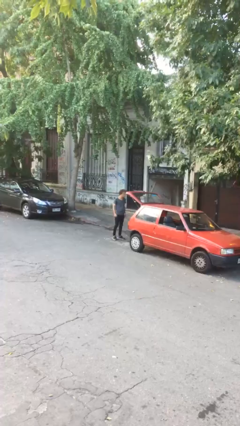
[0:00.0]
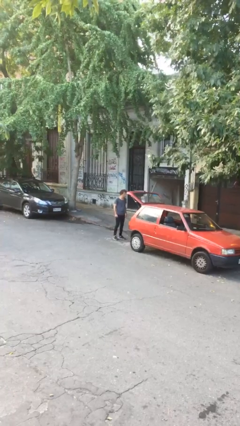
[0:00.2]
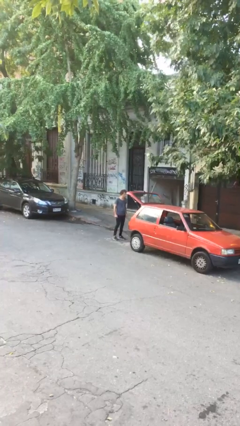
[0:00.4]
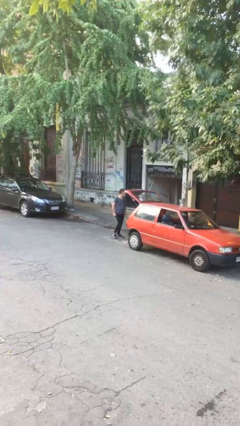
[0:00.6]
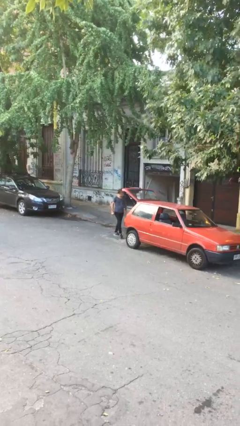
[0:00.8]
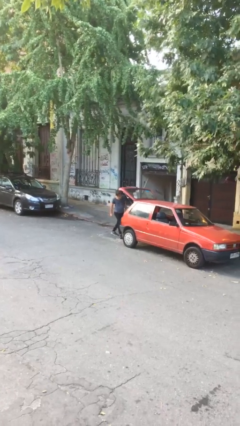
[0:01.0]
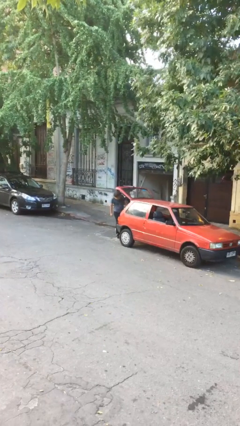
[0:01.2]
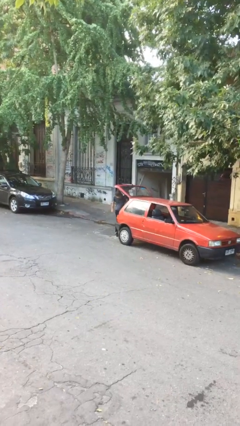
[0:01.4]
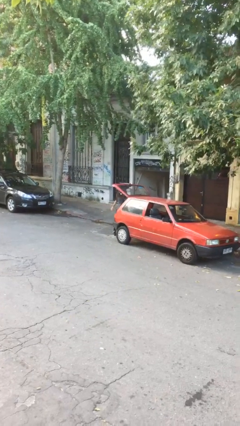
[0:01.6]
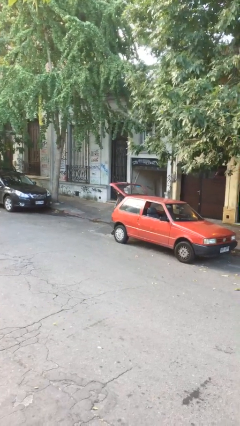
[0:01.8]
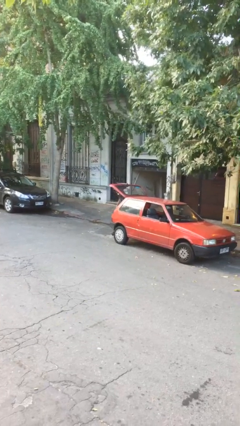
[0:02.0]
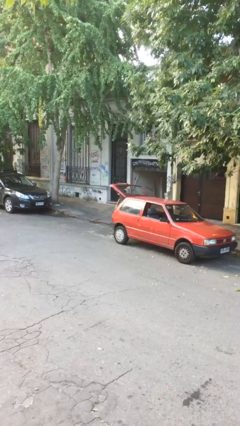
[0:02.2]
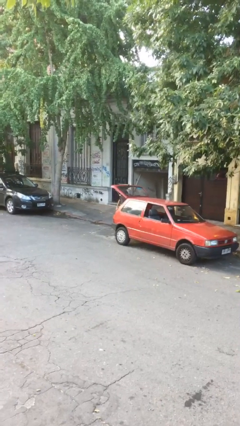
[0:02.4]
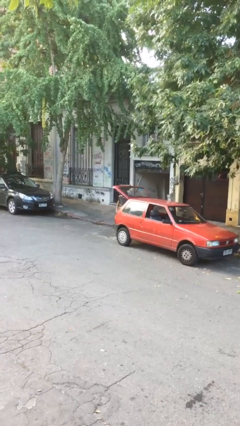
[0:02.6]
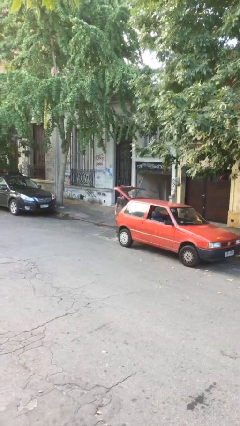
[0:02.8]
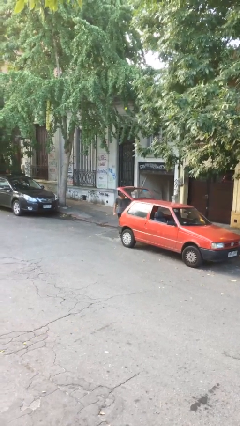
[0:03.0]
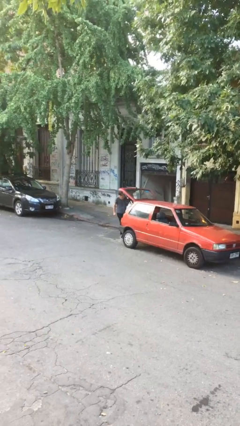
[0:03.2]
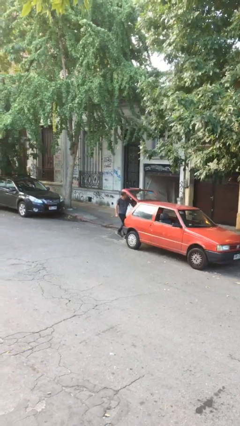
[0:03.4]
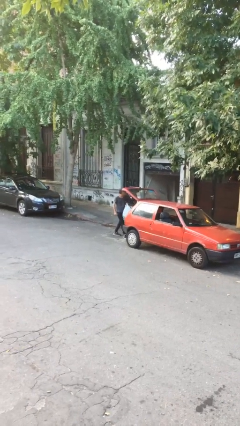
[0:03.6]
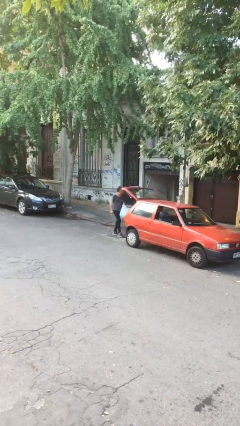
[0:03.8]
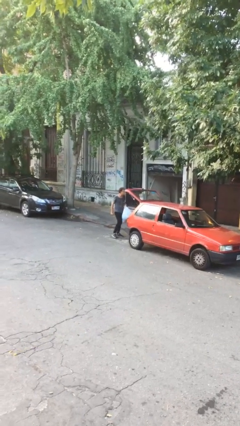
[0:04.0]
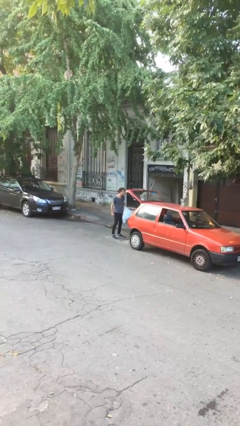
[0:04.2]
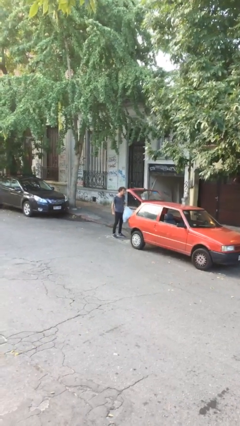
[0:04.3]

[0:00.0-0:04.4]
person unloads car

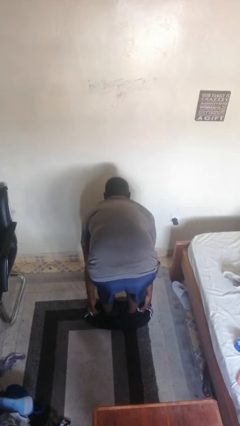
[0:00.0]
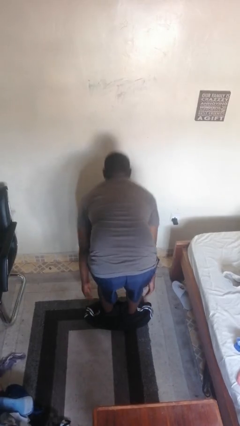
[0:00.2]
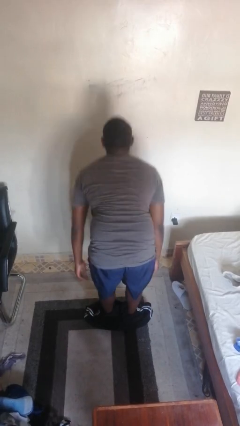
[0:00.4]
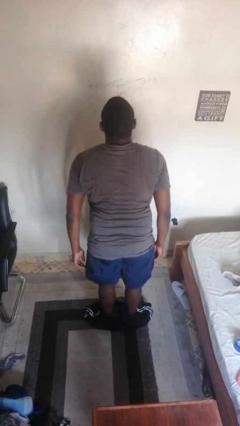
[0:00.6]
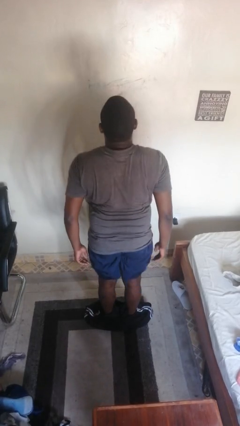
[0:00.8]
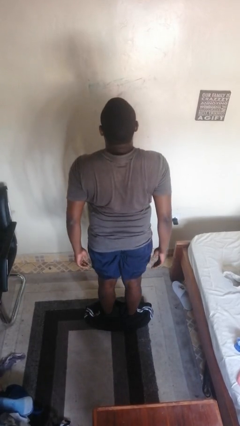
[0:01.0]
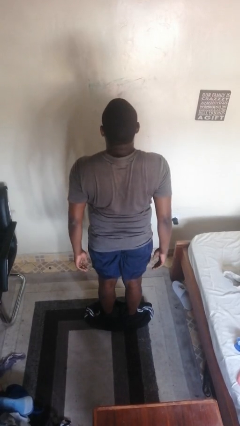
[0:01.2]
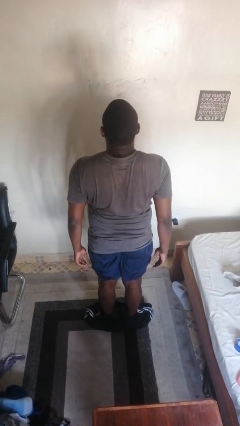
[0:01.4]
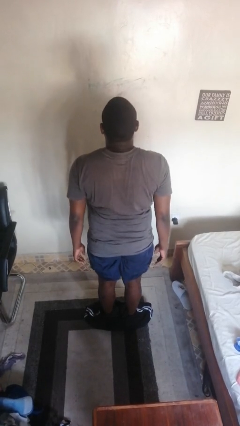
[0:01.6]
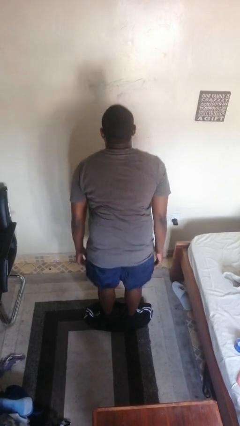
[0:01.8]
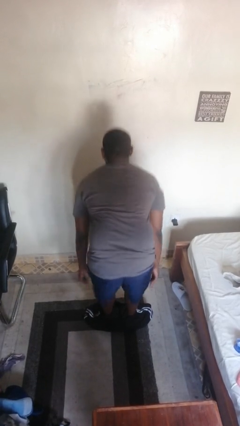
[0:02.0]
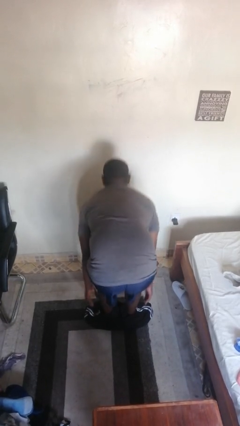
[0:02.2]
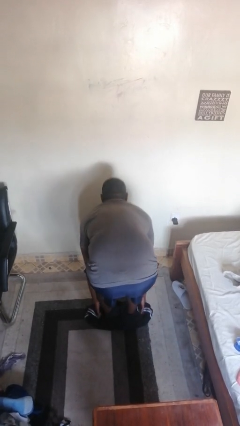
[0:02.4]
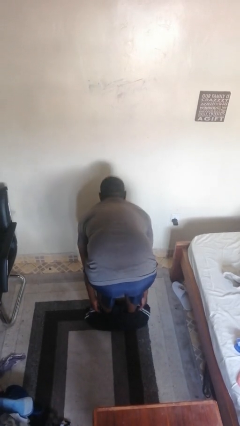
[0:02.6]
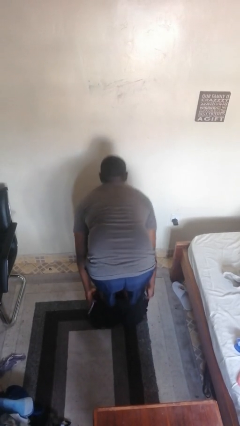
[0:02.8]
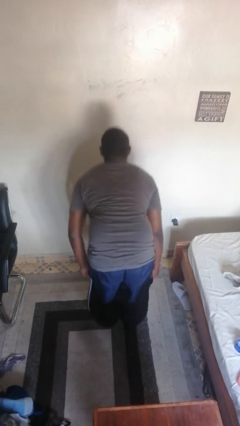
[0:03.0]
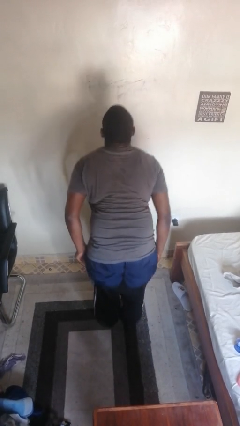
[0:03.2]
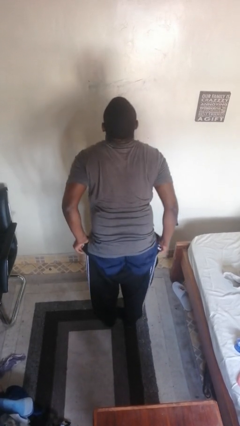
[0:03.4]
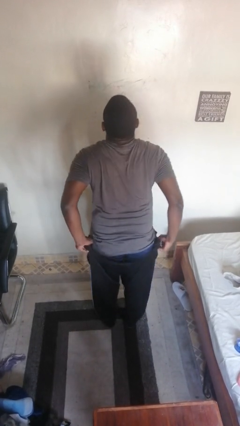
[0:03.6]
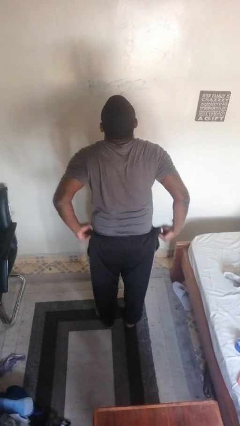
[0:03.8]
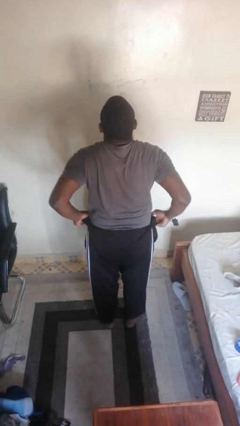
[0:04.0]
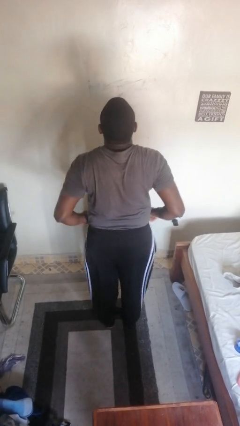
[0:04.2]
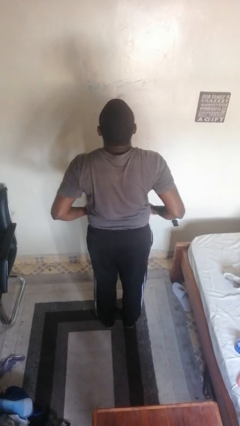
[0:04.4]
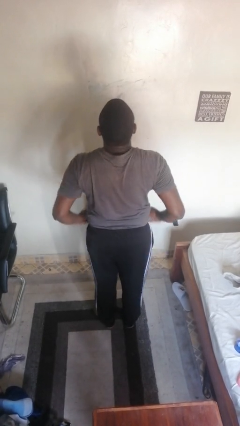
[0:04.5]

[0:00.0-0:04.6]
person puts on pants

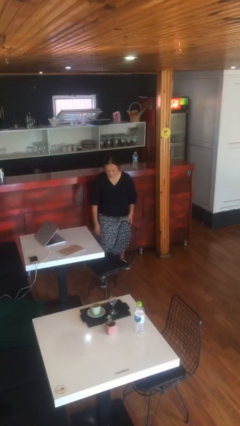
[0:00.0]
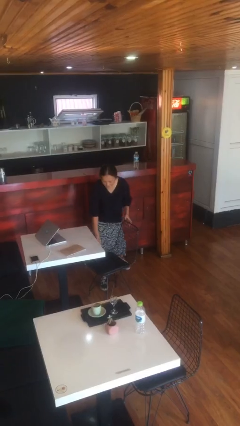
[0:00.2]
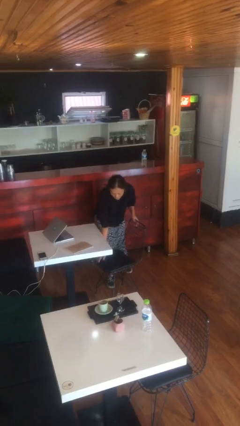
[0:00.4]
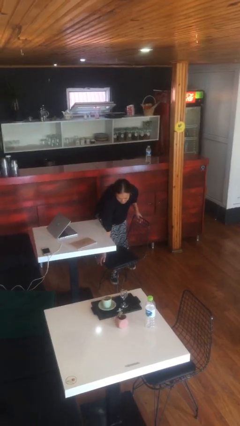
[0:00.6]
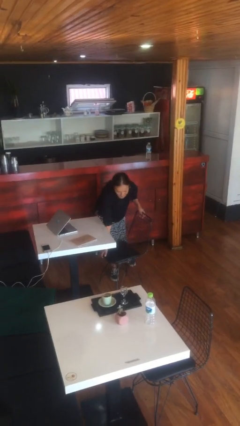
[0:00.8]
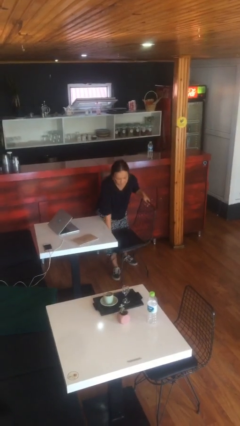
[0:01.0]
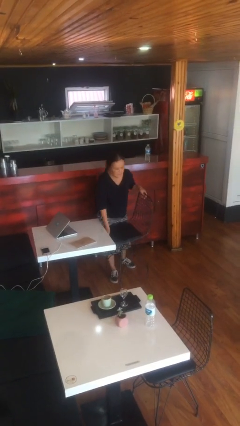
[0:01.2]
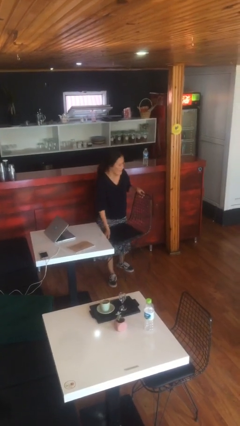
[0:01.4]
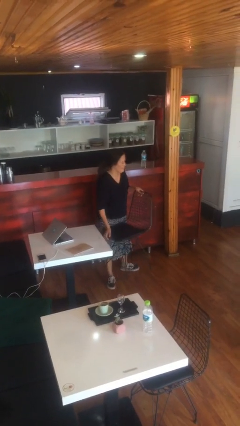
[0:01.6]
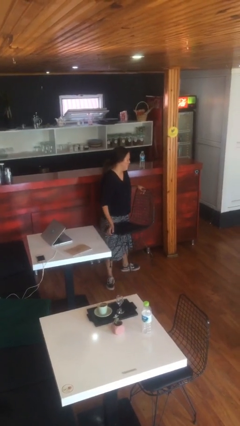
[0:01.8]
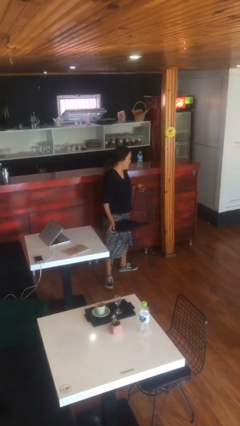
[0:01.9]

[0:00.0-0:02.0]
person picks up object from floor

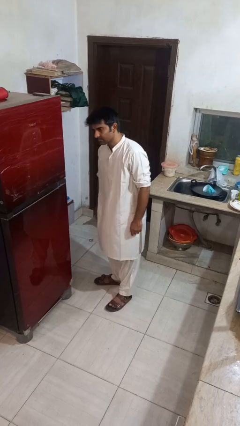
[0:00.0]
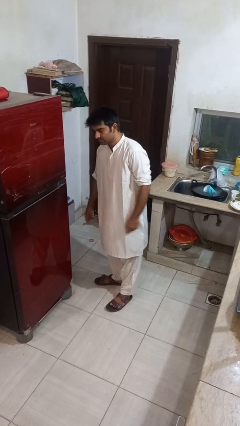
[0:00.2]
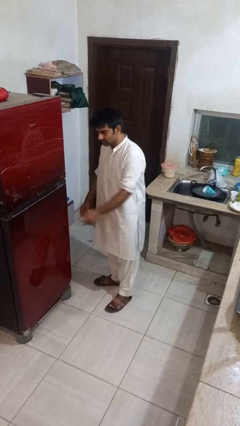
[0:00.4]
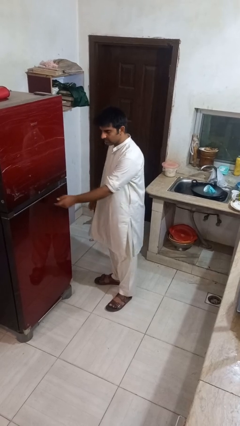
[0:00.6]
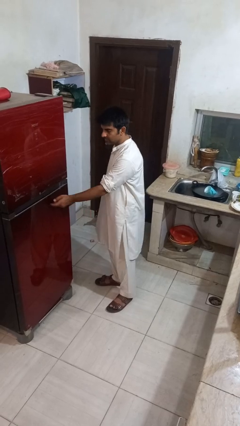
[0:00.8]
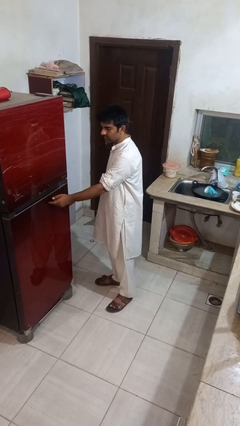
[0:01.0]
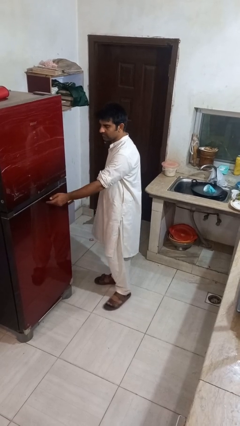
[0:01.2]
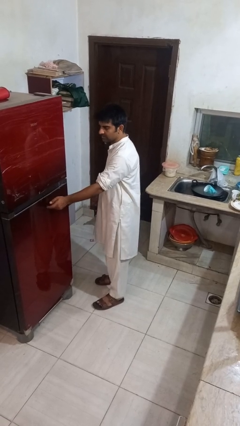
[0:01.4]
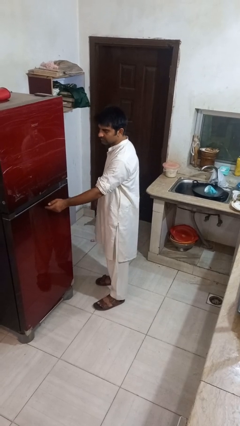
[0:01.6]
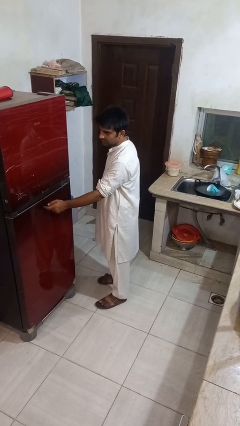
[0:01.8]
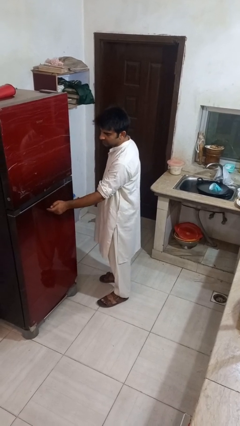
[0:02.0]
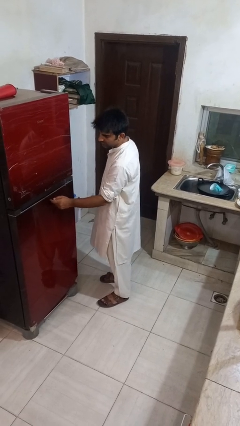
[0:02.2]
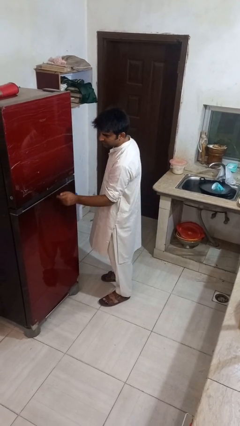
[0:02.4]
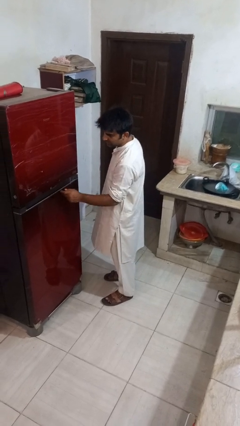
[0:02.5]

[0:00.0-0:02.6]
person taps object with finger

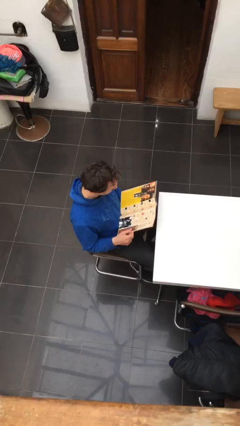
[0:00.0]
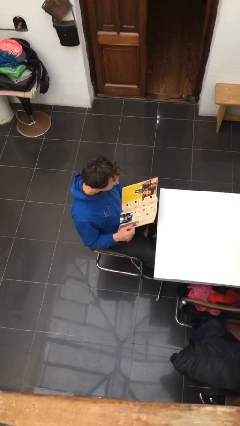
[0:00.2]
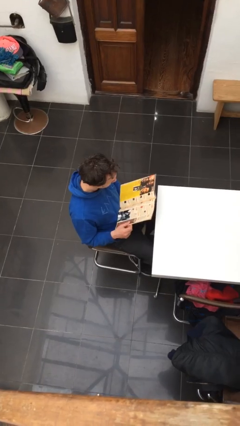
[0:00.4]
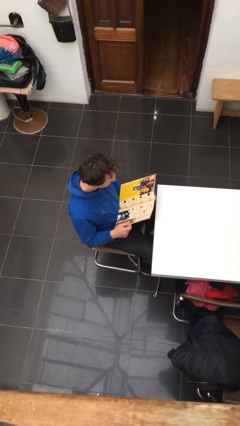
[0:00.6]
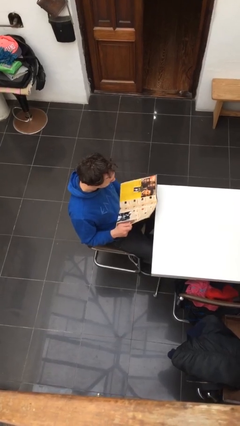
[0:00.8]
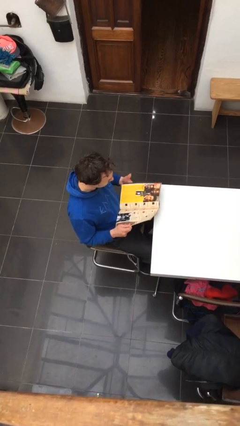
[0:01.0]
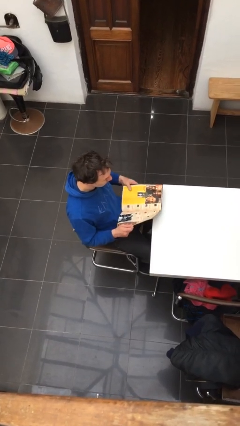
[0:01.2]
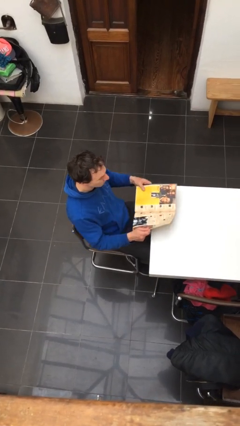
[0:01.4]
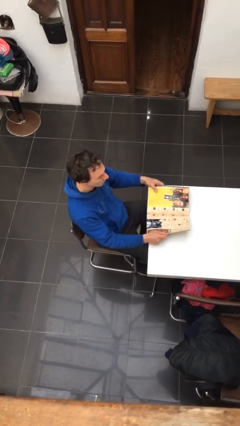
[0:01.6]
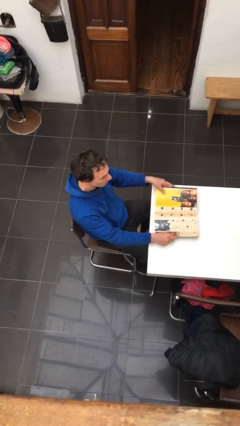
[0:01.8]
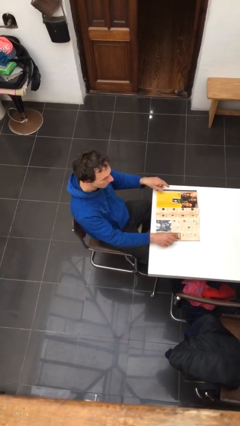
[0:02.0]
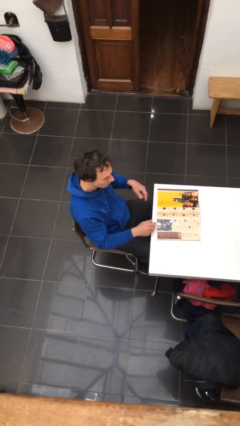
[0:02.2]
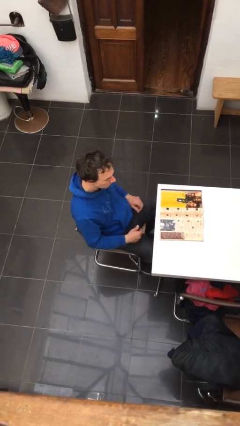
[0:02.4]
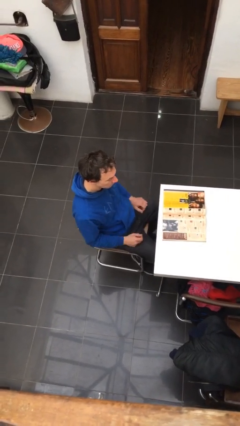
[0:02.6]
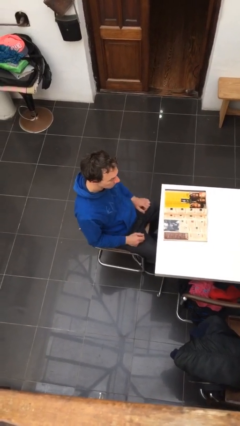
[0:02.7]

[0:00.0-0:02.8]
person puts down object on table

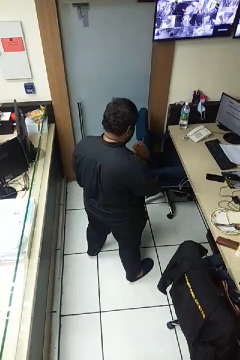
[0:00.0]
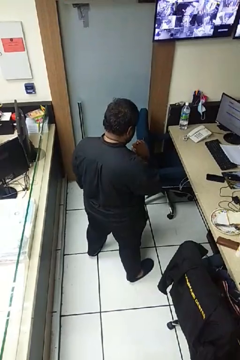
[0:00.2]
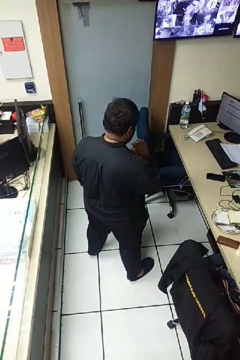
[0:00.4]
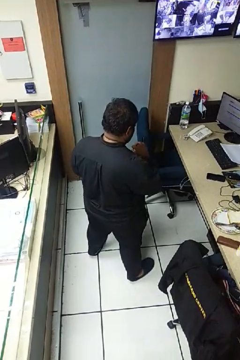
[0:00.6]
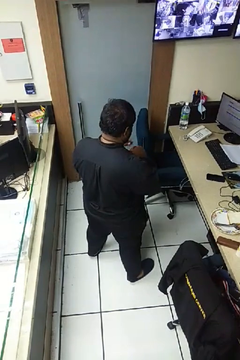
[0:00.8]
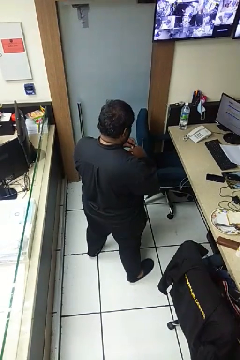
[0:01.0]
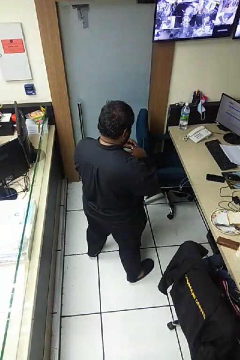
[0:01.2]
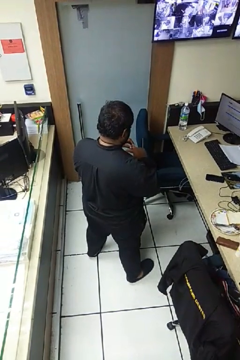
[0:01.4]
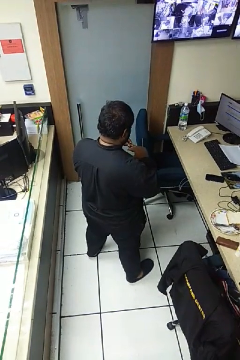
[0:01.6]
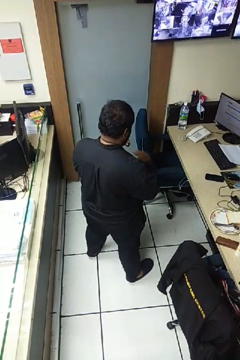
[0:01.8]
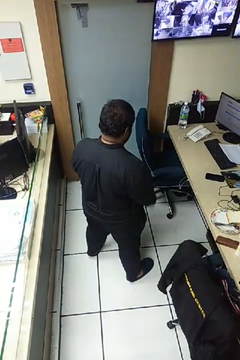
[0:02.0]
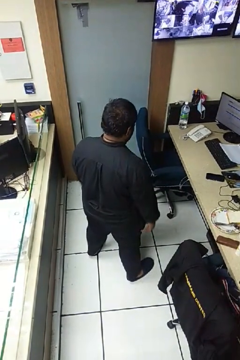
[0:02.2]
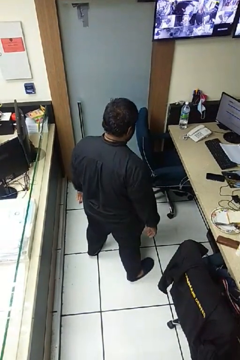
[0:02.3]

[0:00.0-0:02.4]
person takes off ring
